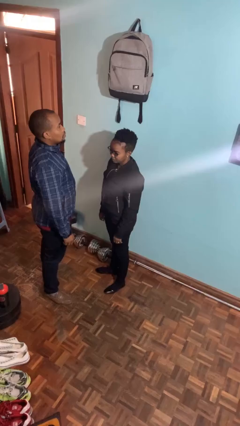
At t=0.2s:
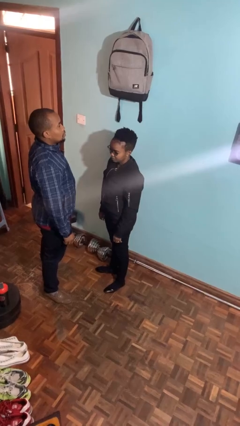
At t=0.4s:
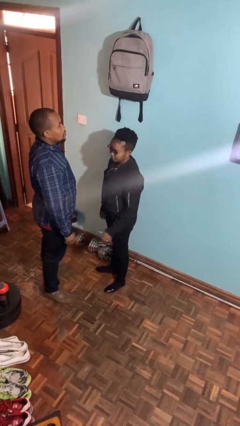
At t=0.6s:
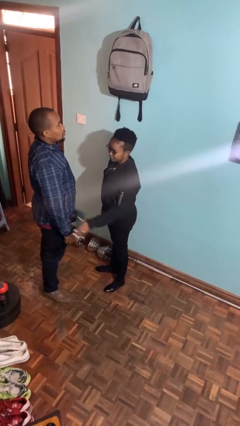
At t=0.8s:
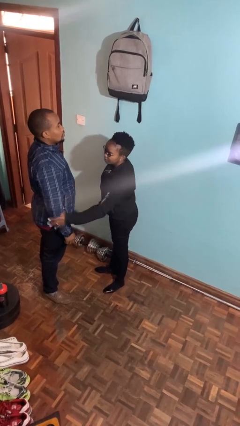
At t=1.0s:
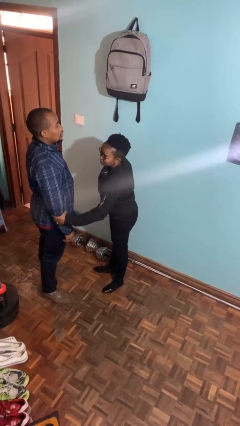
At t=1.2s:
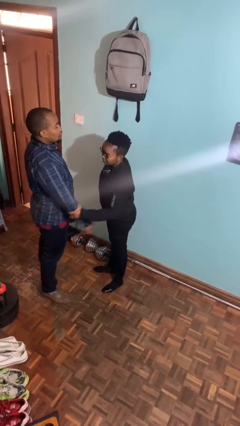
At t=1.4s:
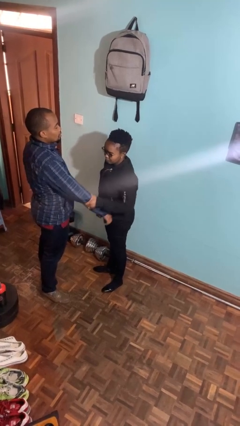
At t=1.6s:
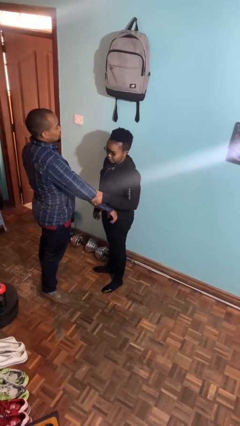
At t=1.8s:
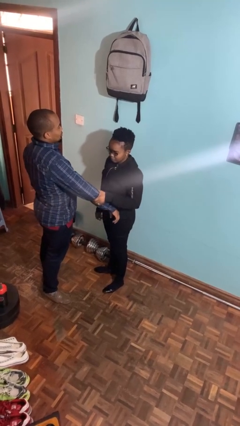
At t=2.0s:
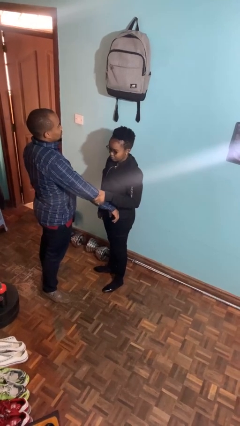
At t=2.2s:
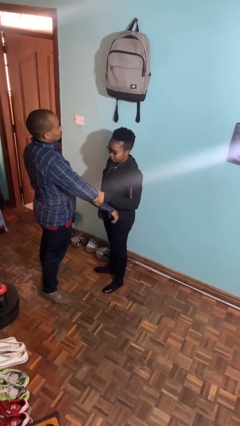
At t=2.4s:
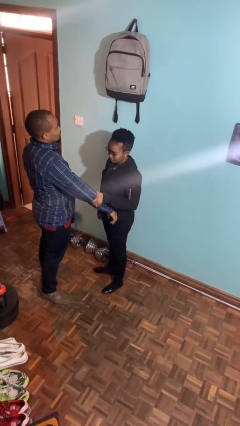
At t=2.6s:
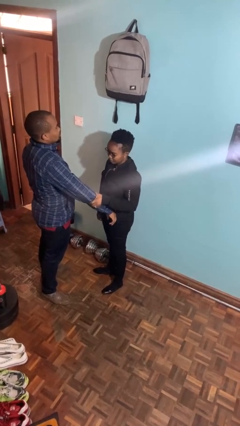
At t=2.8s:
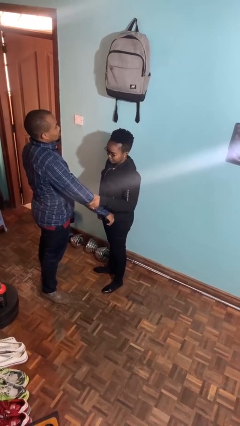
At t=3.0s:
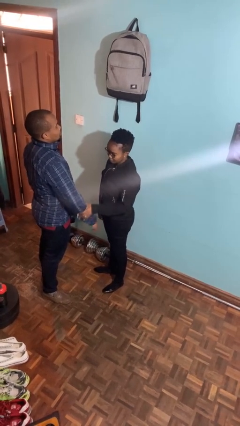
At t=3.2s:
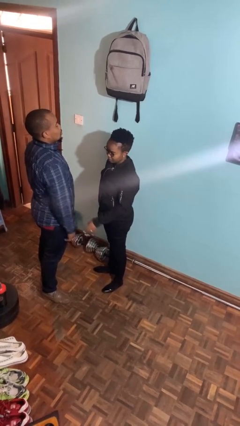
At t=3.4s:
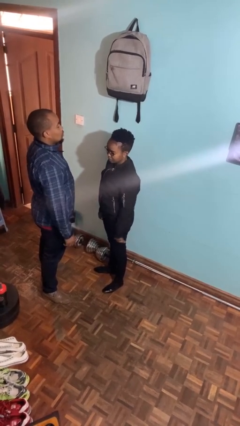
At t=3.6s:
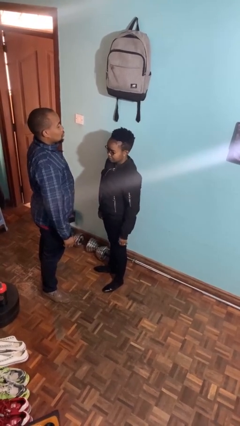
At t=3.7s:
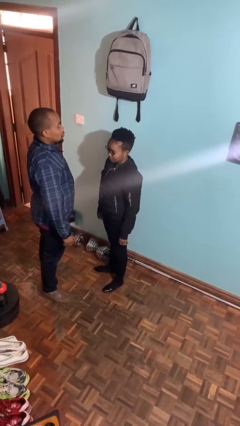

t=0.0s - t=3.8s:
person grabs person by forearm

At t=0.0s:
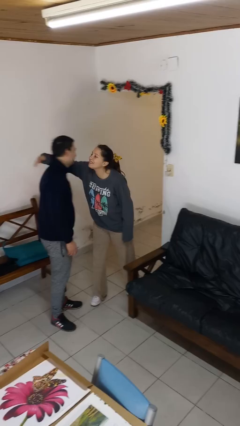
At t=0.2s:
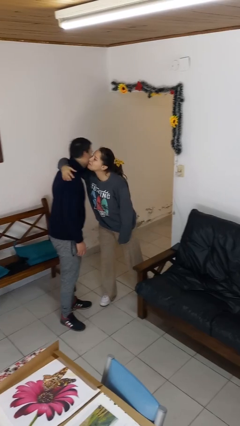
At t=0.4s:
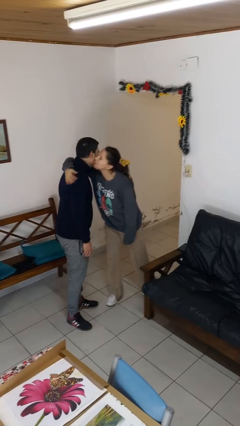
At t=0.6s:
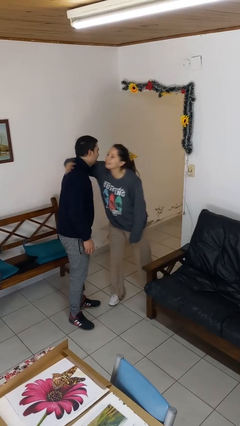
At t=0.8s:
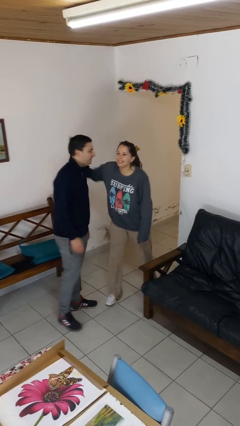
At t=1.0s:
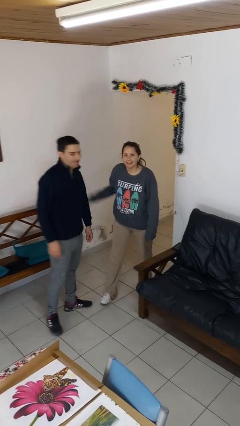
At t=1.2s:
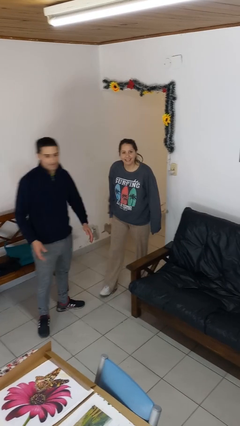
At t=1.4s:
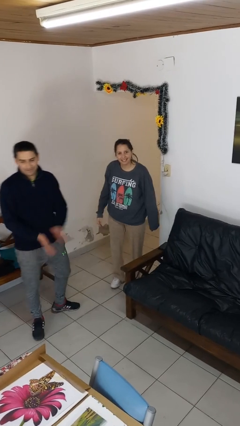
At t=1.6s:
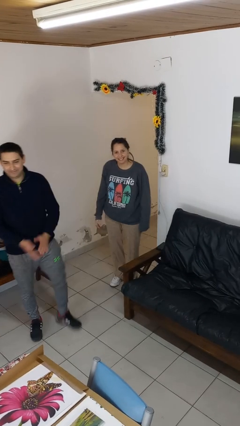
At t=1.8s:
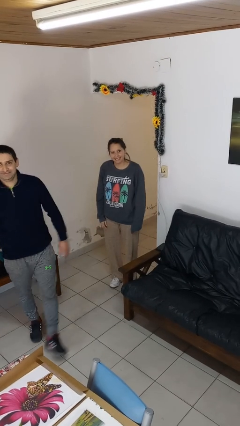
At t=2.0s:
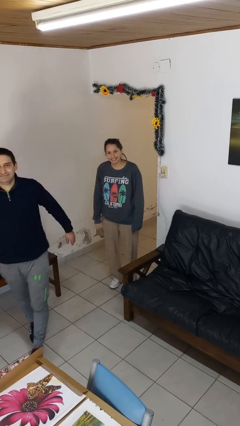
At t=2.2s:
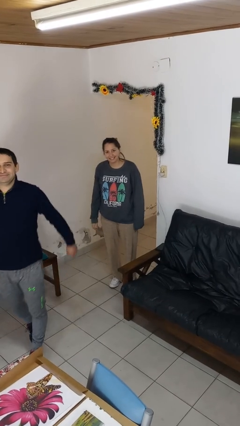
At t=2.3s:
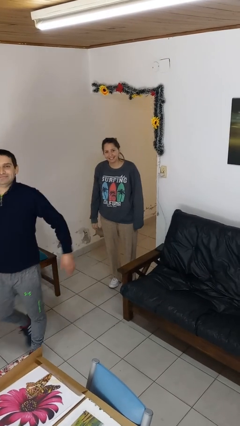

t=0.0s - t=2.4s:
person kisses cheek of person

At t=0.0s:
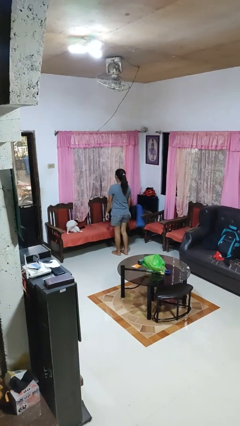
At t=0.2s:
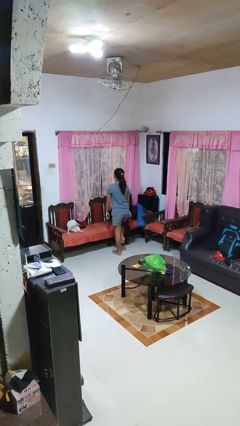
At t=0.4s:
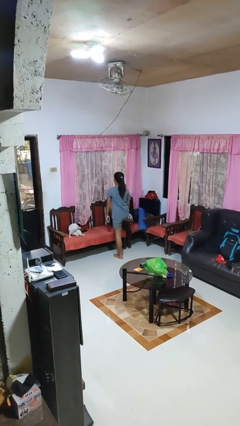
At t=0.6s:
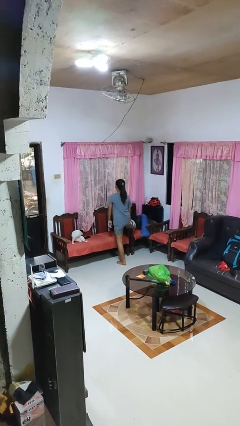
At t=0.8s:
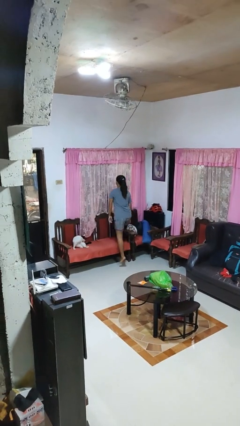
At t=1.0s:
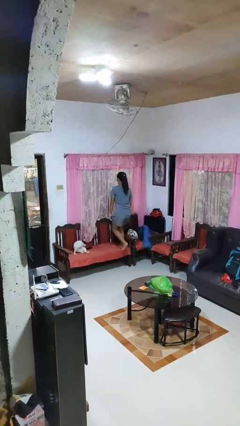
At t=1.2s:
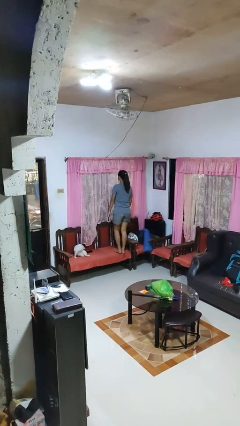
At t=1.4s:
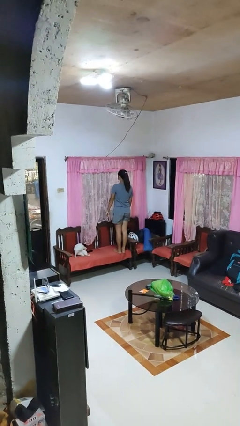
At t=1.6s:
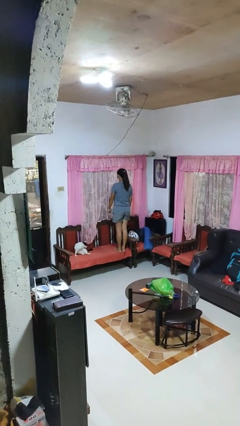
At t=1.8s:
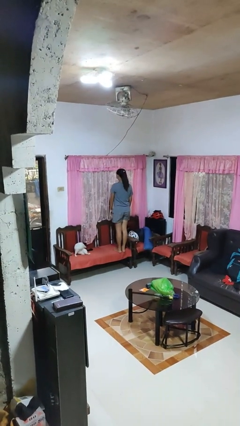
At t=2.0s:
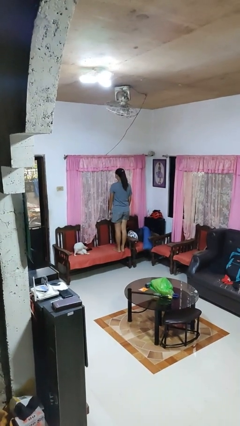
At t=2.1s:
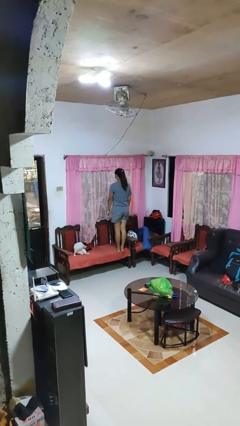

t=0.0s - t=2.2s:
person climbs on chair

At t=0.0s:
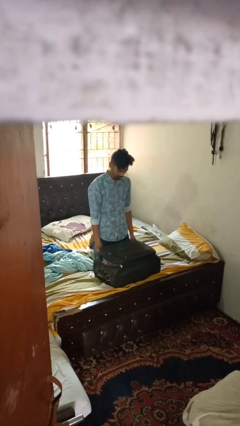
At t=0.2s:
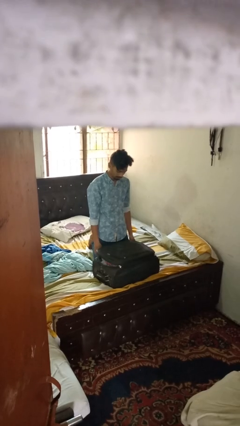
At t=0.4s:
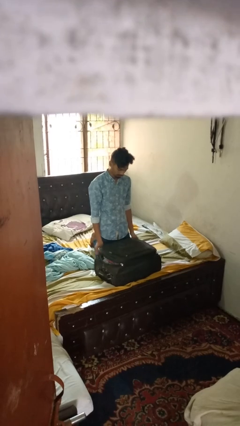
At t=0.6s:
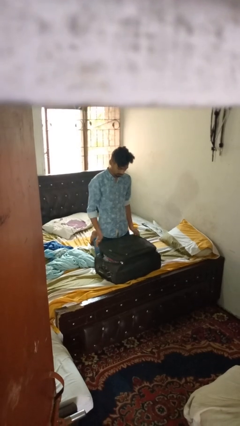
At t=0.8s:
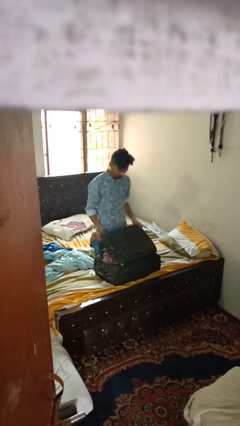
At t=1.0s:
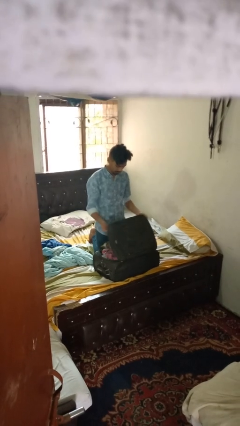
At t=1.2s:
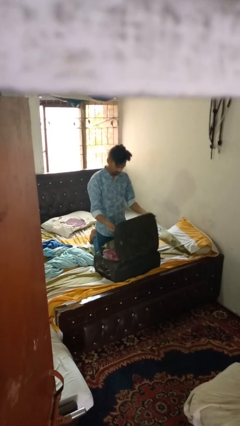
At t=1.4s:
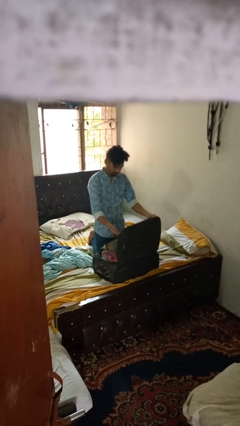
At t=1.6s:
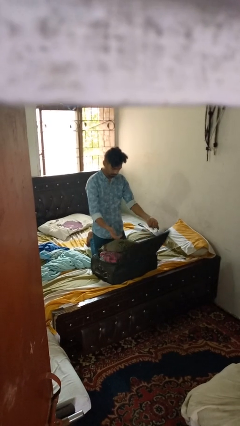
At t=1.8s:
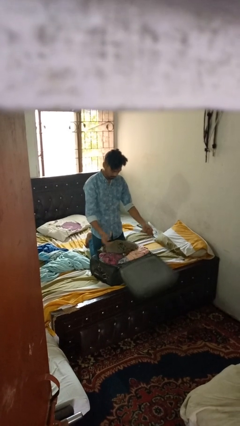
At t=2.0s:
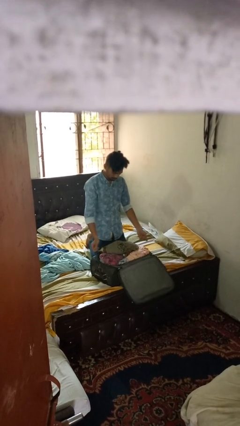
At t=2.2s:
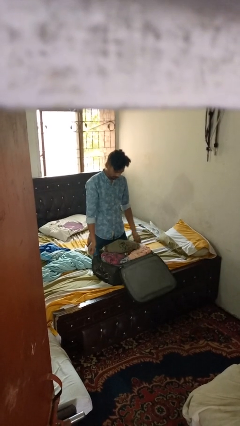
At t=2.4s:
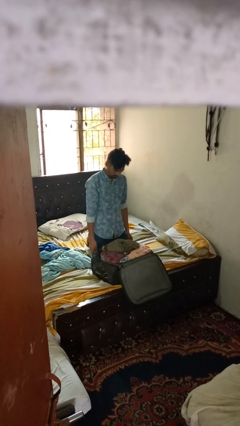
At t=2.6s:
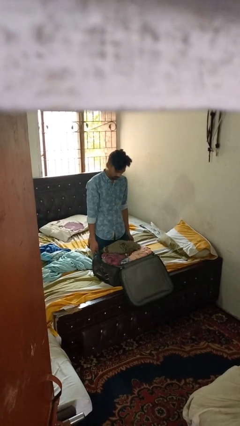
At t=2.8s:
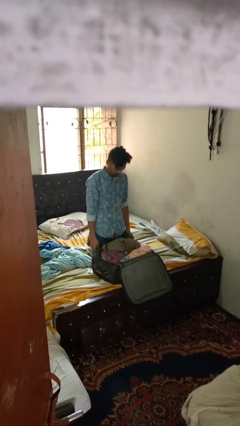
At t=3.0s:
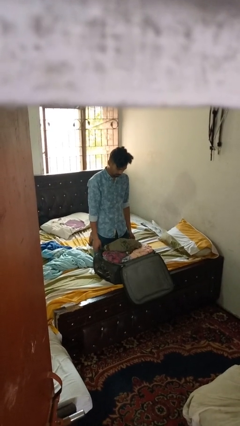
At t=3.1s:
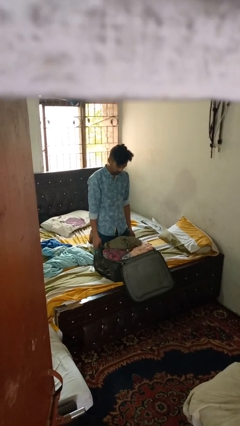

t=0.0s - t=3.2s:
person opens suitcase

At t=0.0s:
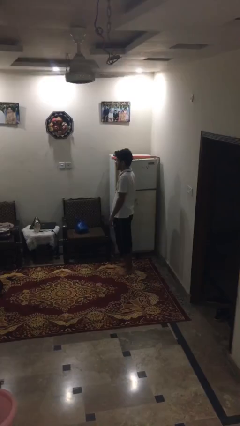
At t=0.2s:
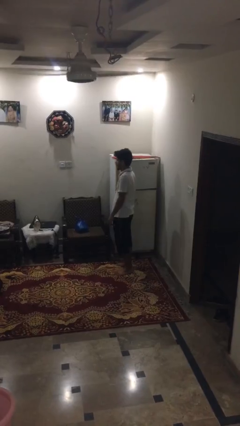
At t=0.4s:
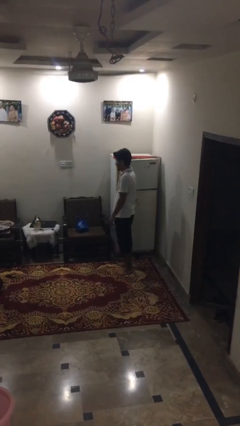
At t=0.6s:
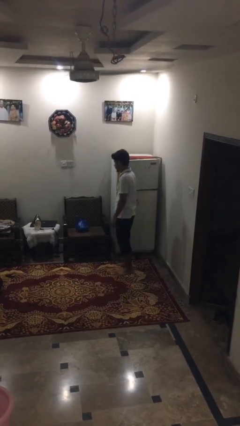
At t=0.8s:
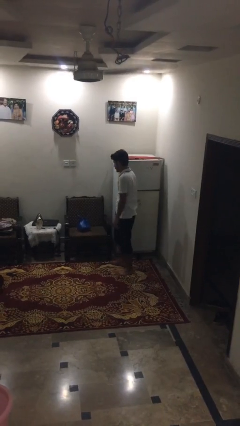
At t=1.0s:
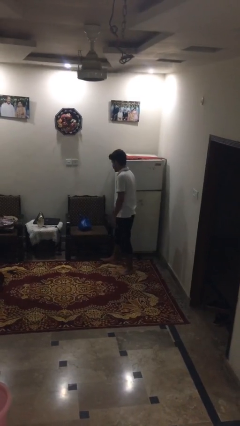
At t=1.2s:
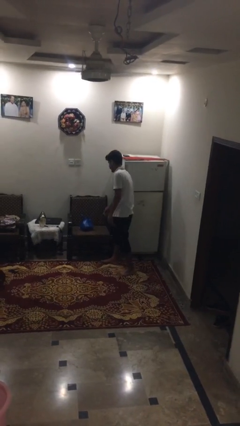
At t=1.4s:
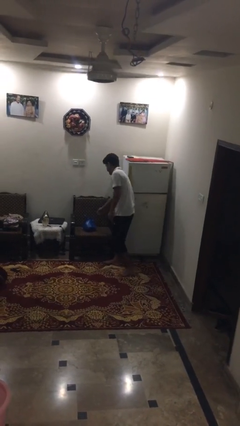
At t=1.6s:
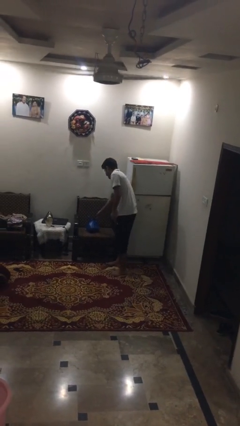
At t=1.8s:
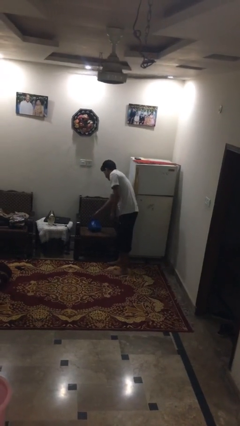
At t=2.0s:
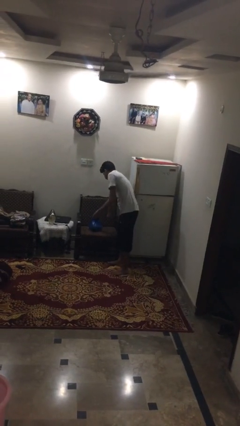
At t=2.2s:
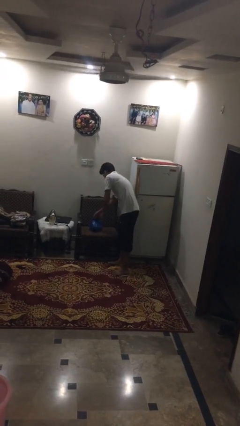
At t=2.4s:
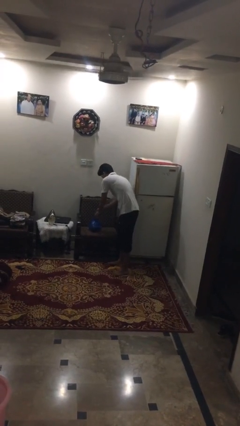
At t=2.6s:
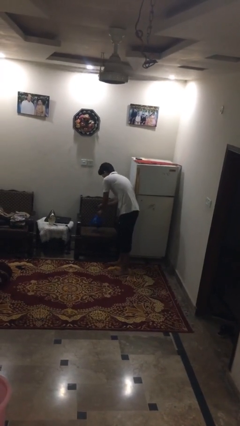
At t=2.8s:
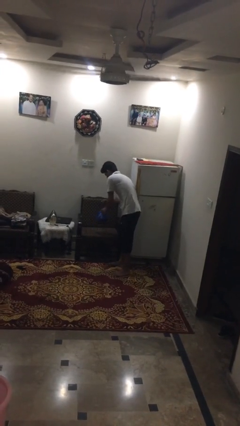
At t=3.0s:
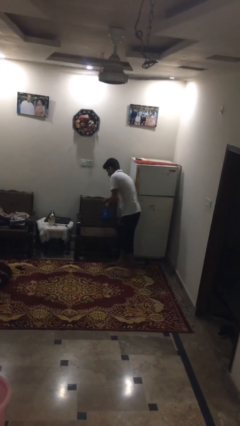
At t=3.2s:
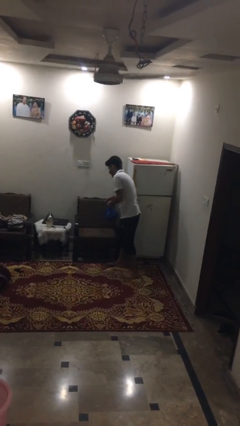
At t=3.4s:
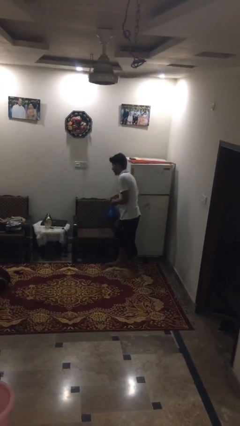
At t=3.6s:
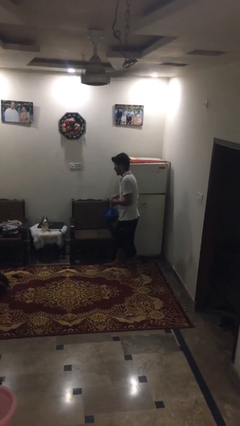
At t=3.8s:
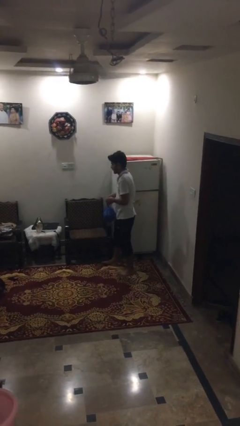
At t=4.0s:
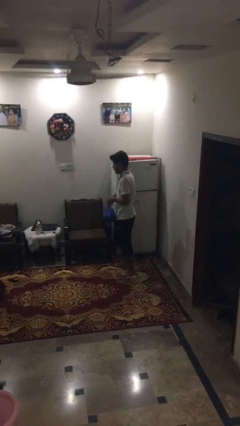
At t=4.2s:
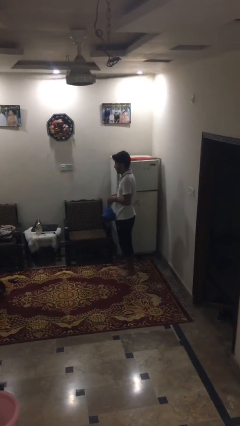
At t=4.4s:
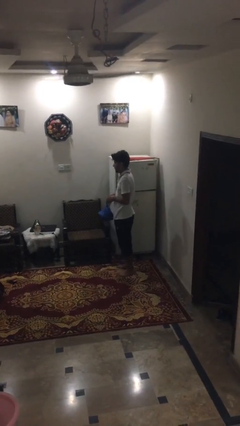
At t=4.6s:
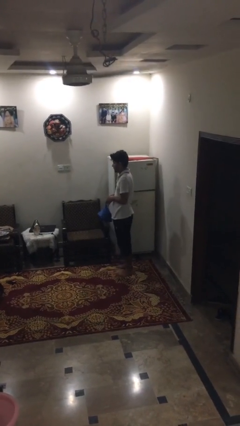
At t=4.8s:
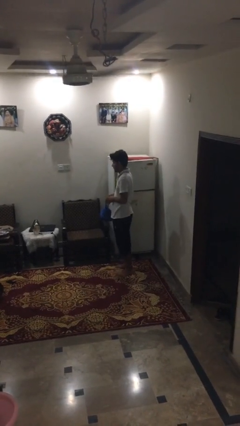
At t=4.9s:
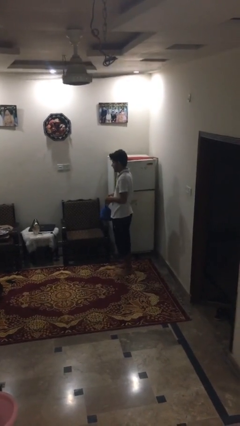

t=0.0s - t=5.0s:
person picks up object from couch

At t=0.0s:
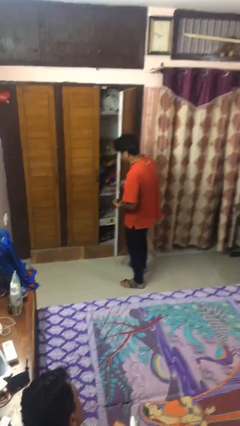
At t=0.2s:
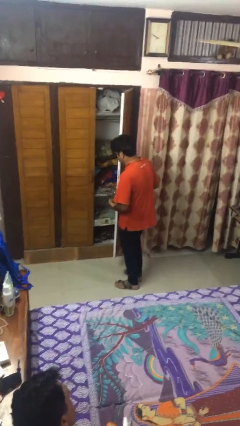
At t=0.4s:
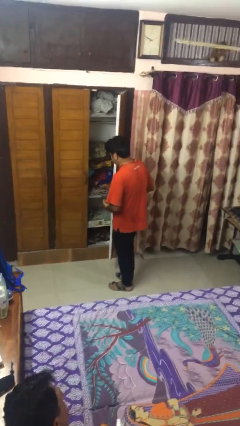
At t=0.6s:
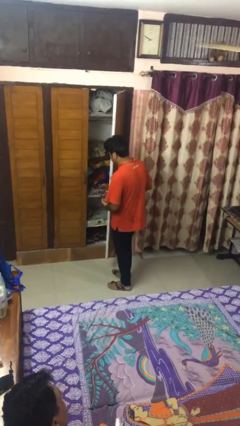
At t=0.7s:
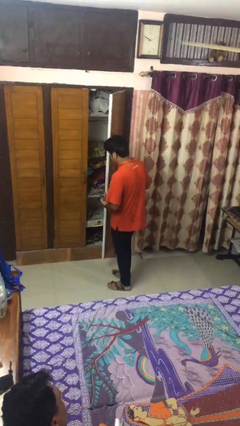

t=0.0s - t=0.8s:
person opens facility door
